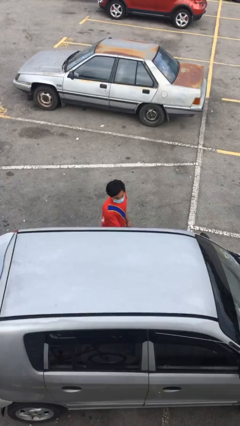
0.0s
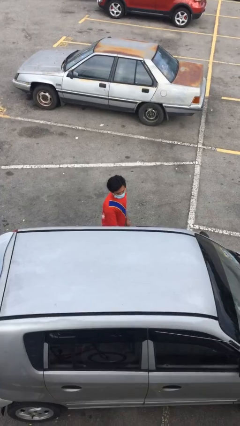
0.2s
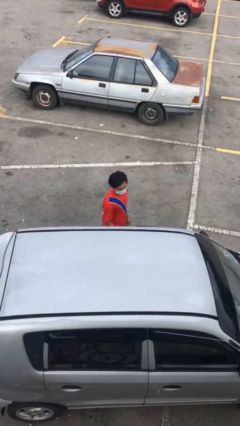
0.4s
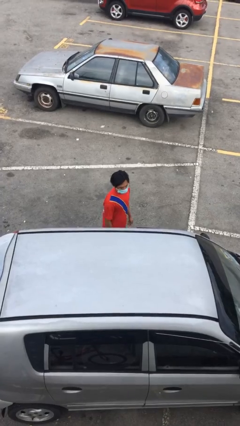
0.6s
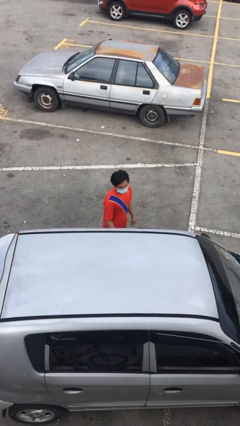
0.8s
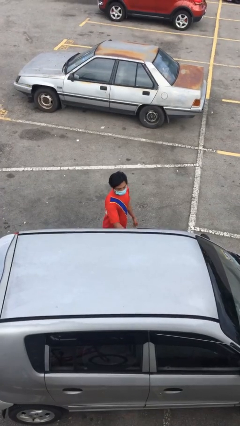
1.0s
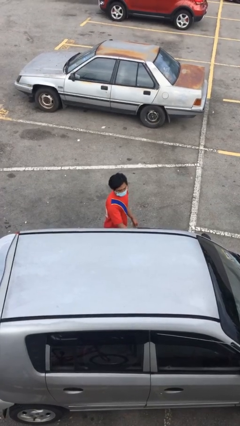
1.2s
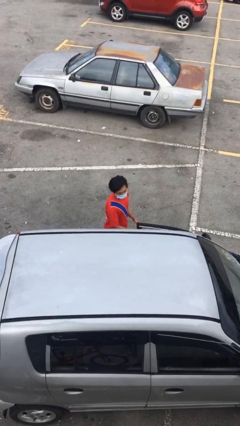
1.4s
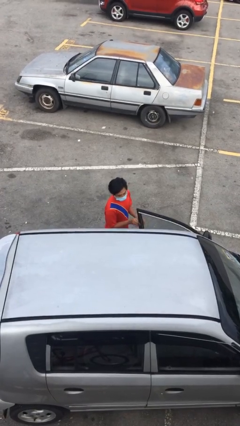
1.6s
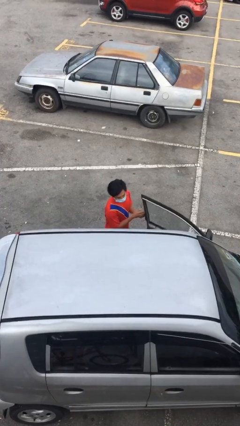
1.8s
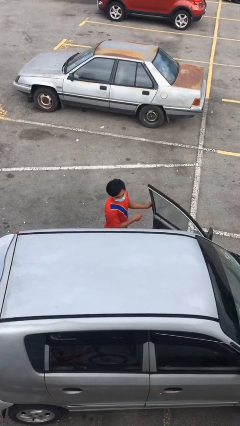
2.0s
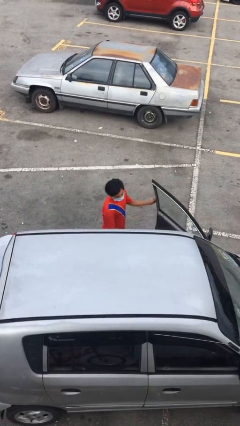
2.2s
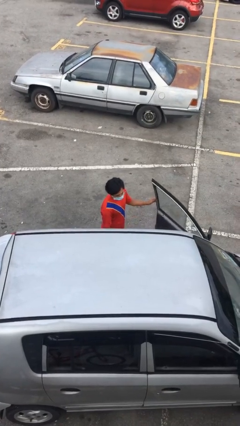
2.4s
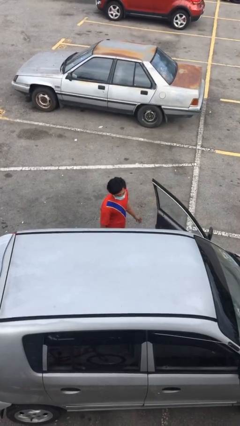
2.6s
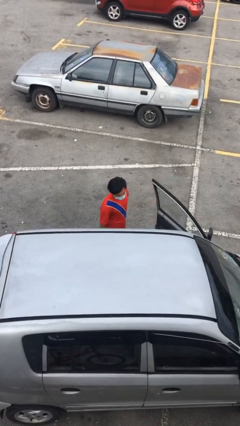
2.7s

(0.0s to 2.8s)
person opens car door

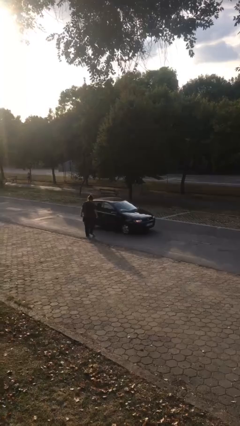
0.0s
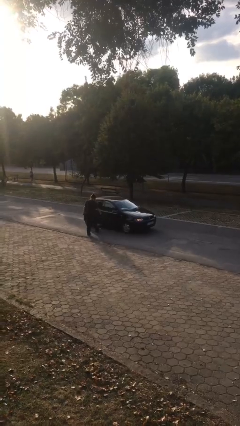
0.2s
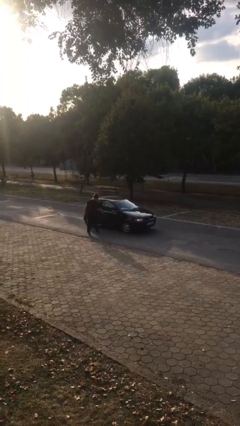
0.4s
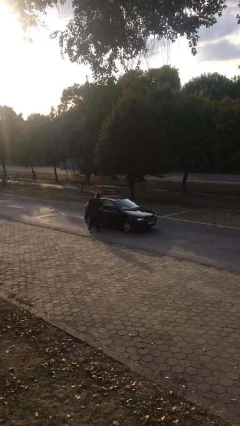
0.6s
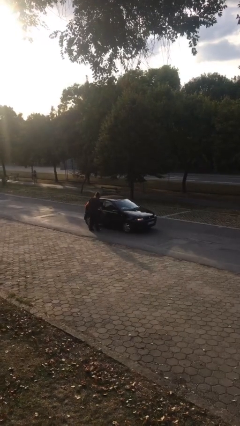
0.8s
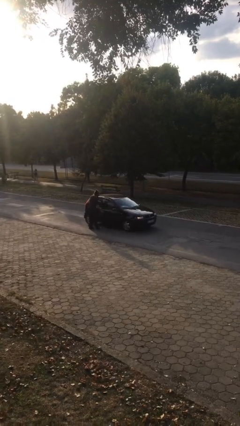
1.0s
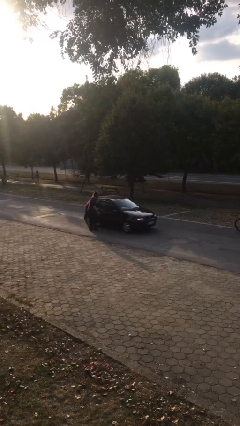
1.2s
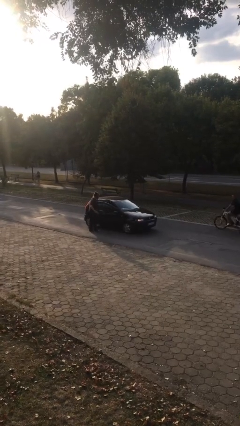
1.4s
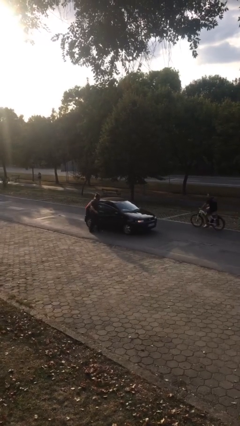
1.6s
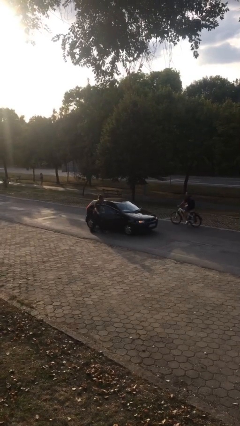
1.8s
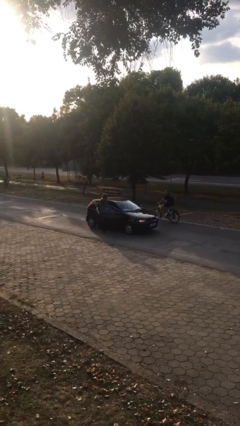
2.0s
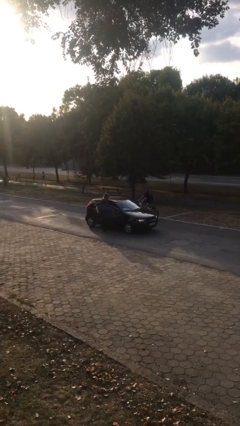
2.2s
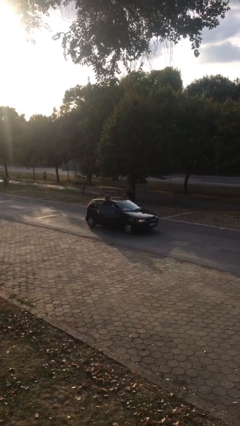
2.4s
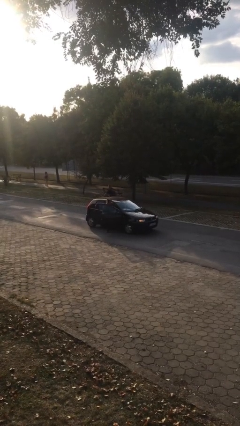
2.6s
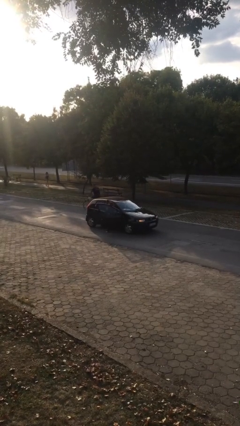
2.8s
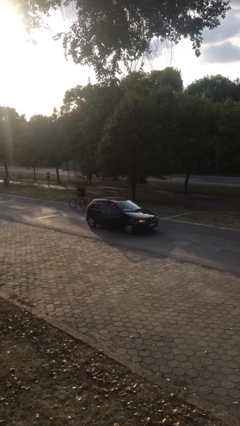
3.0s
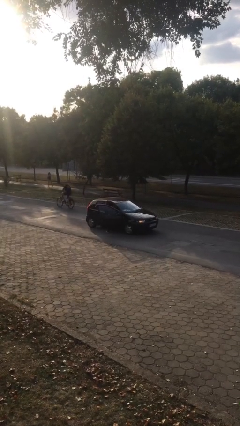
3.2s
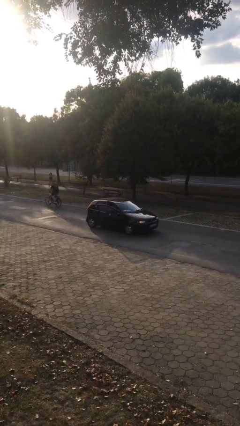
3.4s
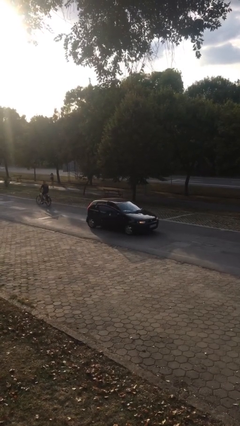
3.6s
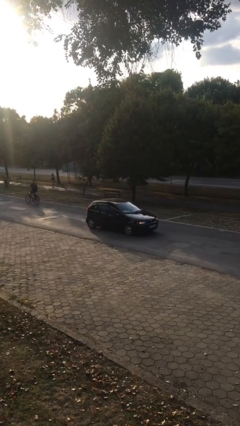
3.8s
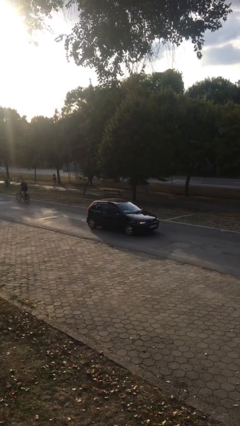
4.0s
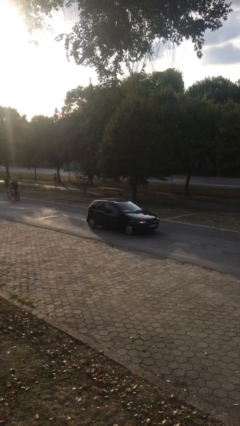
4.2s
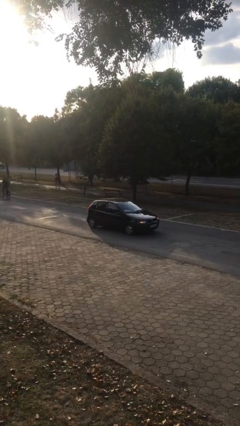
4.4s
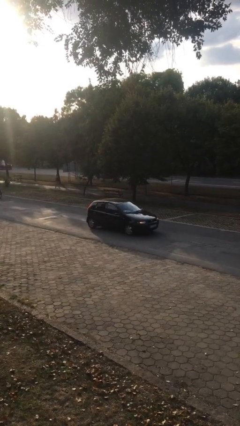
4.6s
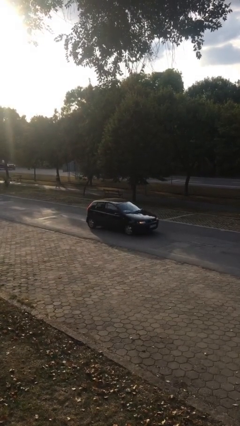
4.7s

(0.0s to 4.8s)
car picks up person

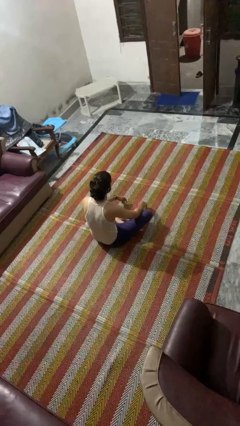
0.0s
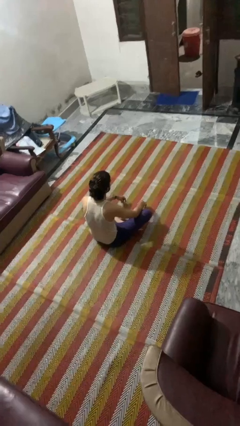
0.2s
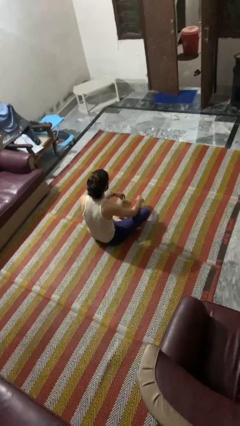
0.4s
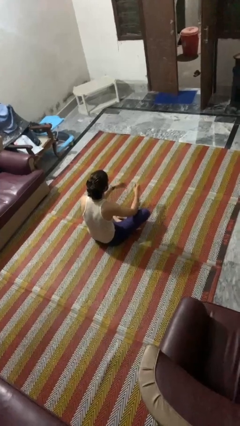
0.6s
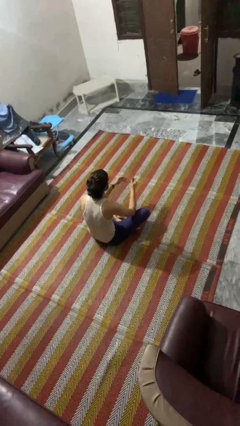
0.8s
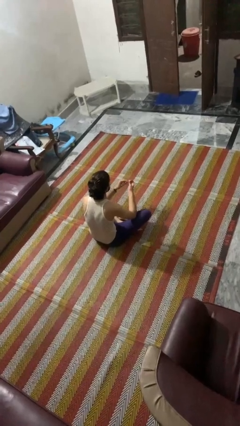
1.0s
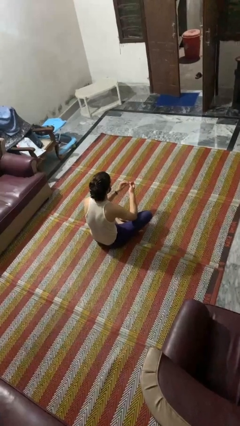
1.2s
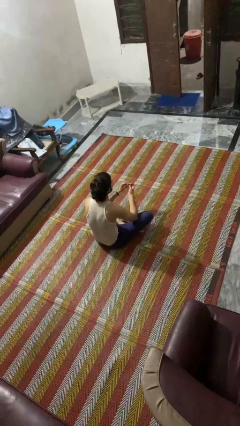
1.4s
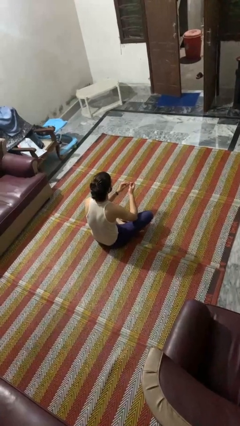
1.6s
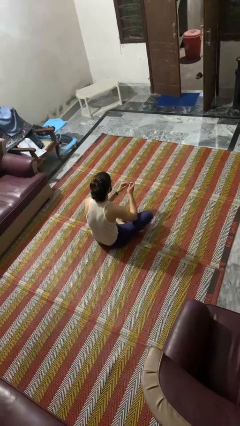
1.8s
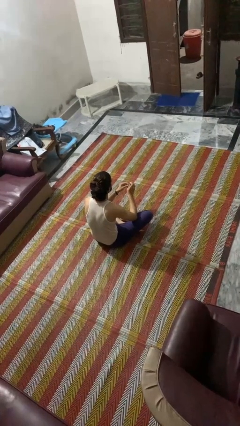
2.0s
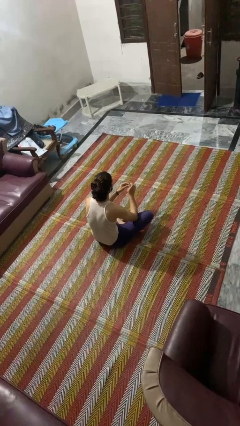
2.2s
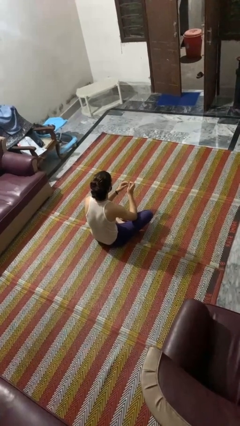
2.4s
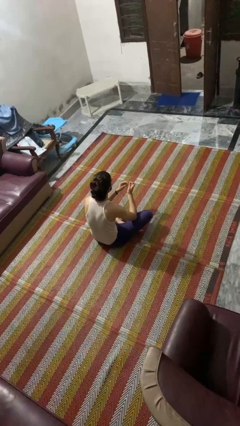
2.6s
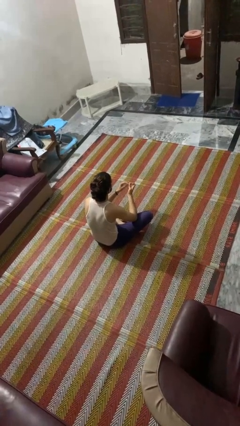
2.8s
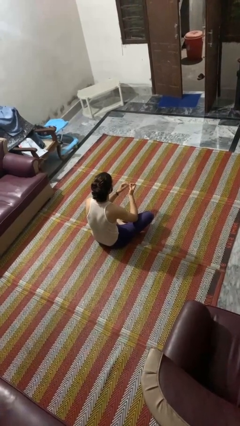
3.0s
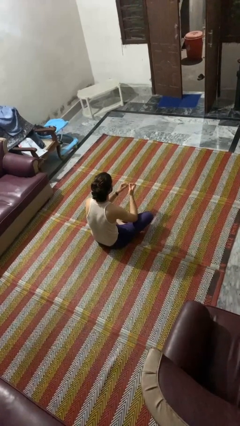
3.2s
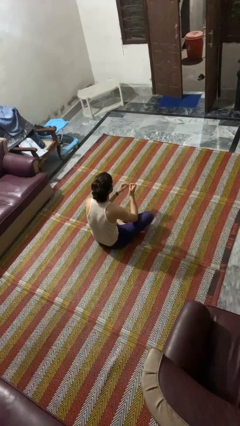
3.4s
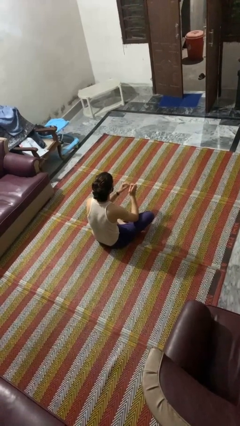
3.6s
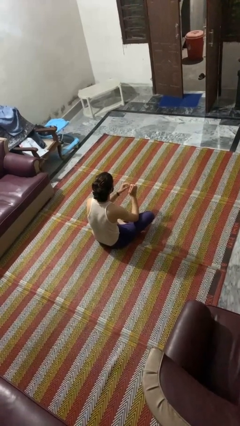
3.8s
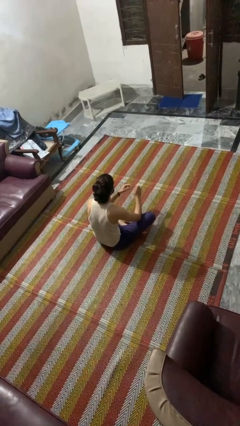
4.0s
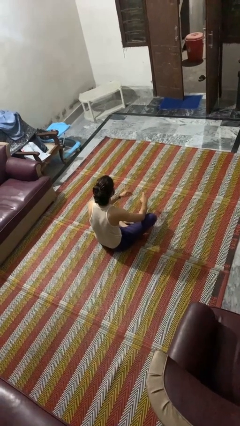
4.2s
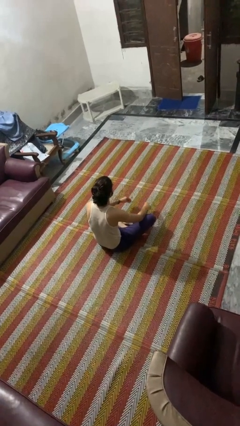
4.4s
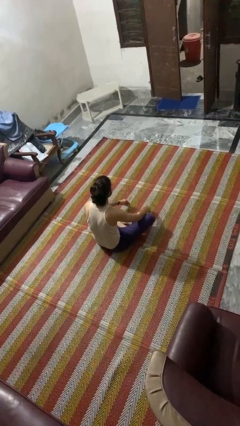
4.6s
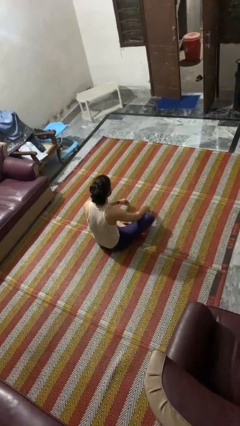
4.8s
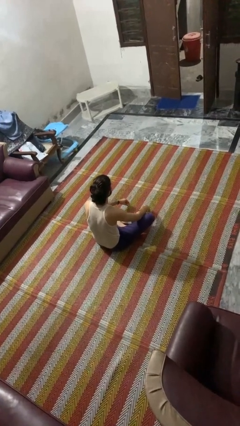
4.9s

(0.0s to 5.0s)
person files fingernails

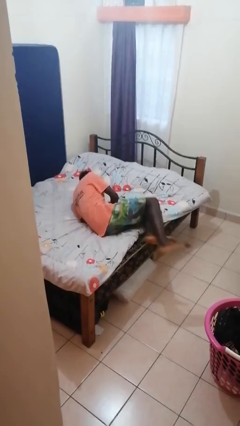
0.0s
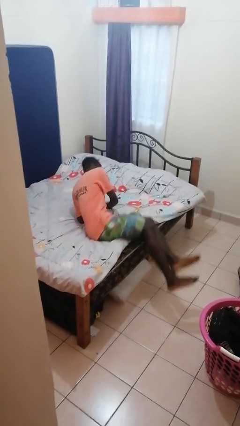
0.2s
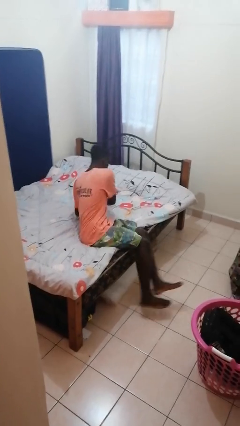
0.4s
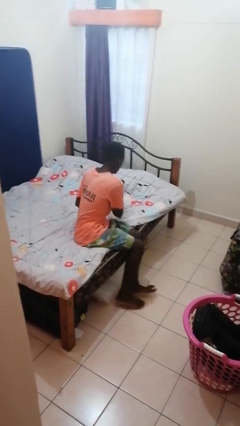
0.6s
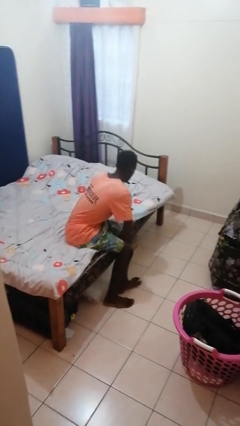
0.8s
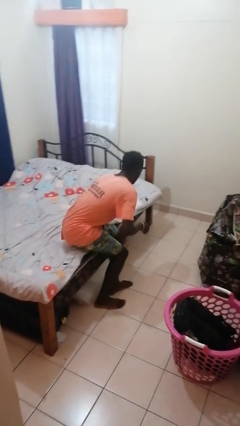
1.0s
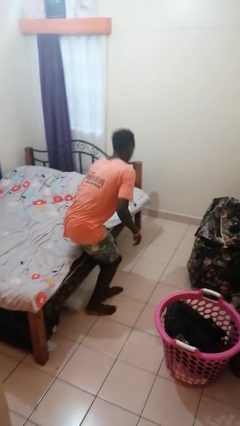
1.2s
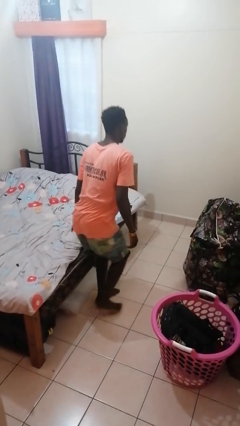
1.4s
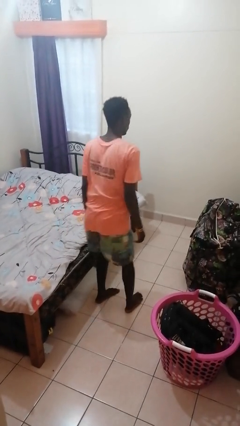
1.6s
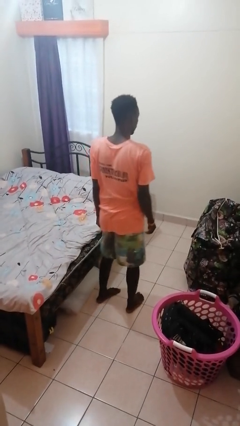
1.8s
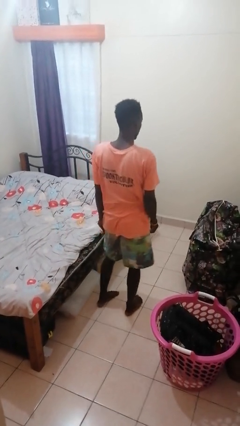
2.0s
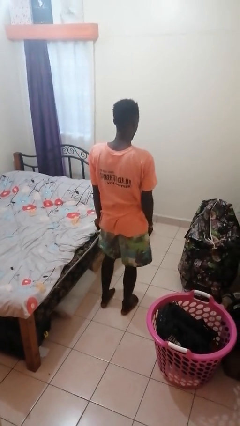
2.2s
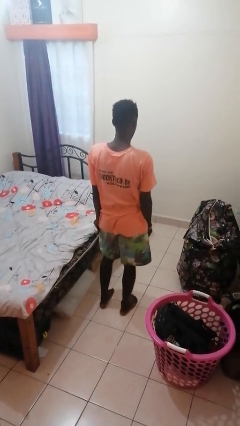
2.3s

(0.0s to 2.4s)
person stands up

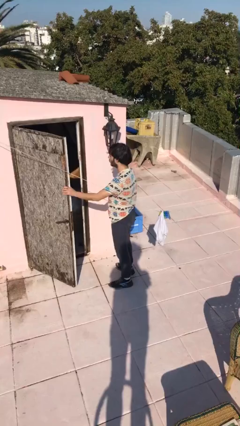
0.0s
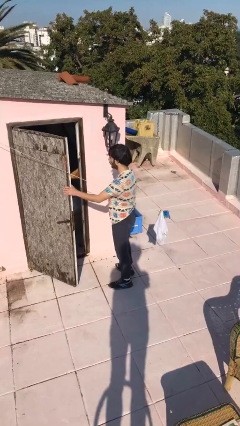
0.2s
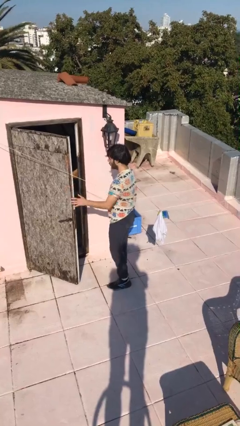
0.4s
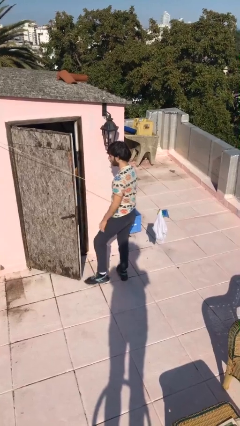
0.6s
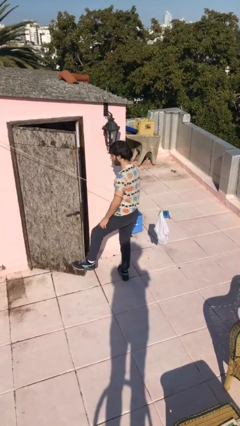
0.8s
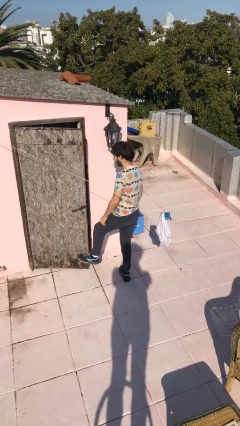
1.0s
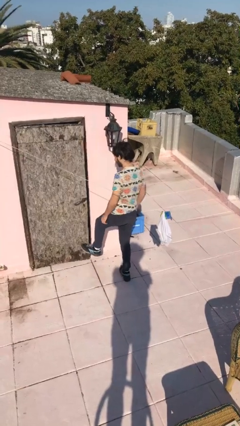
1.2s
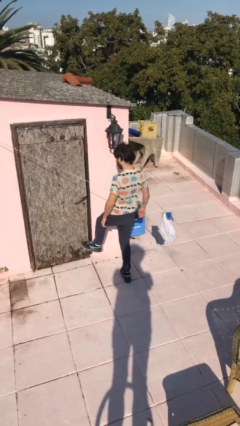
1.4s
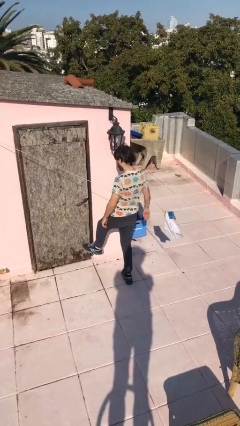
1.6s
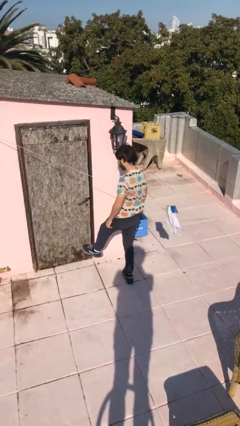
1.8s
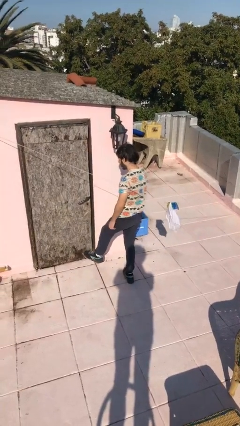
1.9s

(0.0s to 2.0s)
person closes door with foot

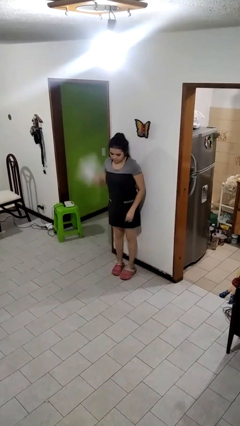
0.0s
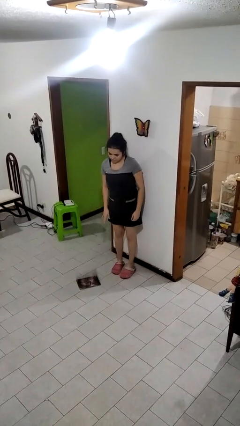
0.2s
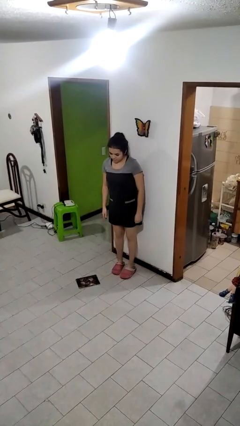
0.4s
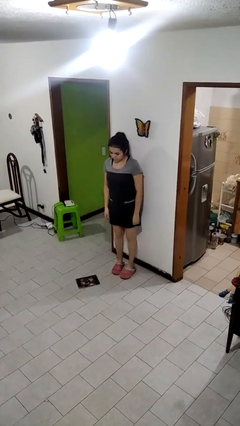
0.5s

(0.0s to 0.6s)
person throws object to ground

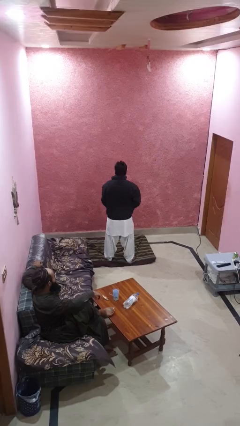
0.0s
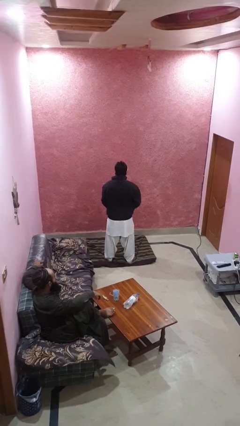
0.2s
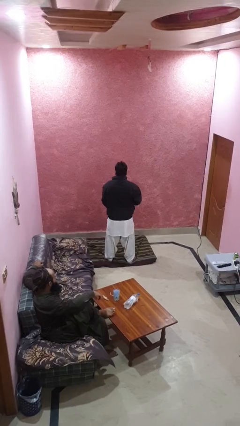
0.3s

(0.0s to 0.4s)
person unzips jacket
